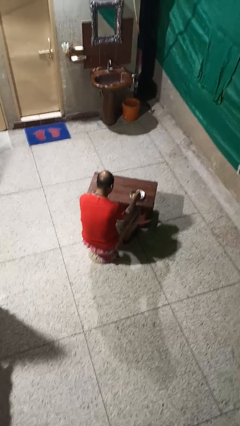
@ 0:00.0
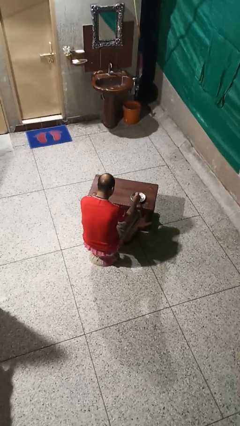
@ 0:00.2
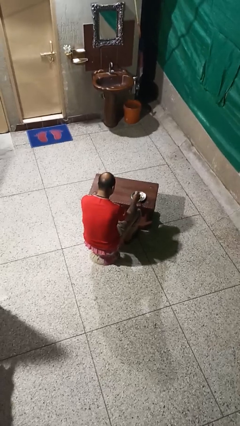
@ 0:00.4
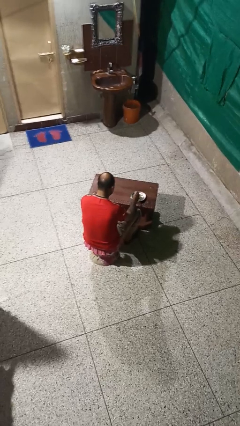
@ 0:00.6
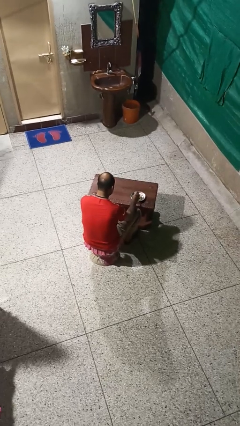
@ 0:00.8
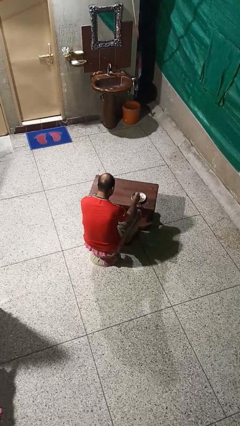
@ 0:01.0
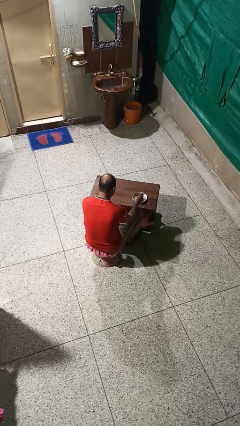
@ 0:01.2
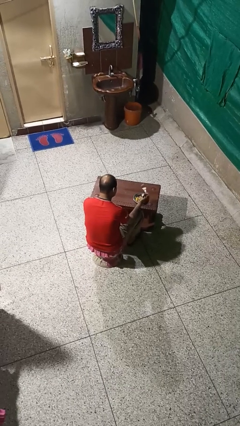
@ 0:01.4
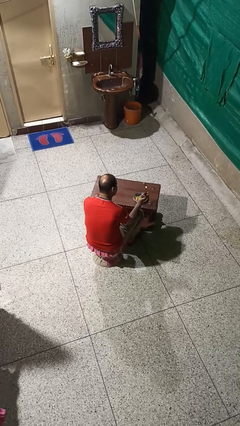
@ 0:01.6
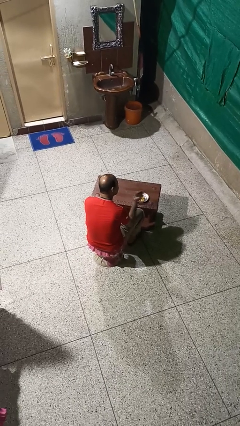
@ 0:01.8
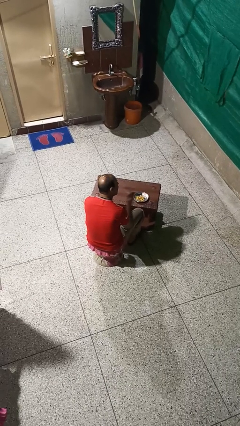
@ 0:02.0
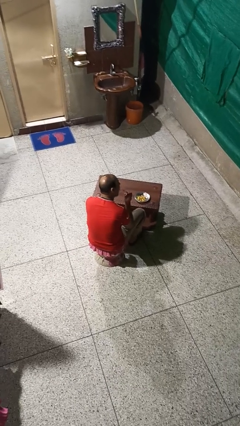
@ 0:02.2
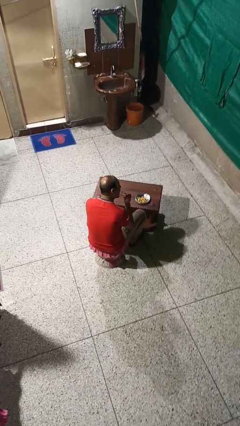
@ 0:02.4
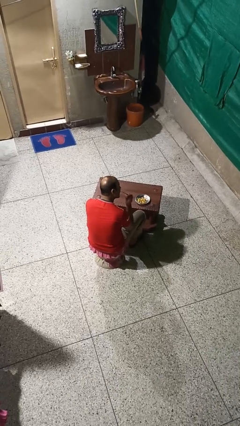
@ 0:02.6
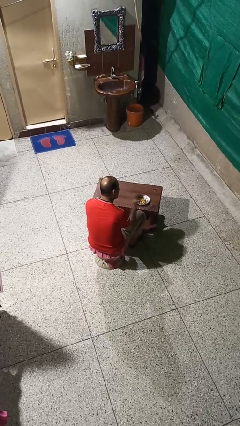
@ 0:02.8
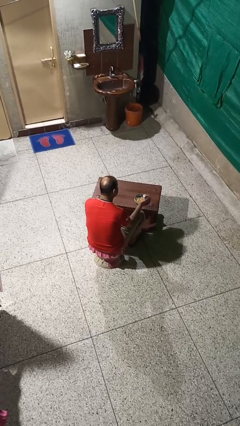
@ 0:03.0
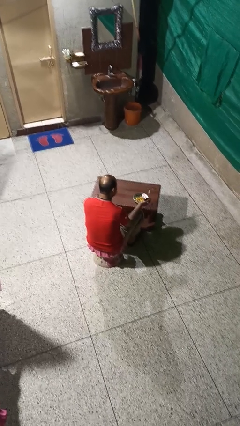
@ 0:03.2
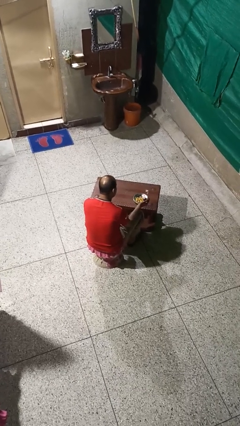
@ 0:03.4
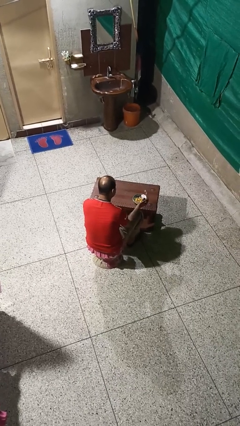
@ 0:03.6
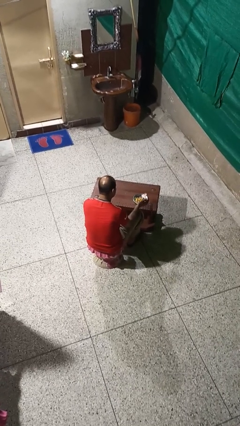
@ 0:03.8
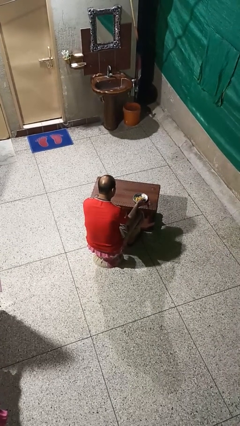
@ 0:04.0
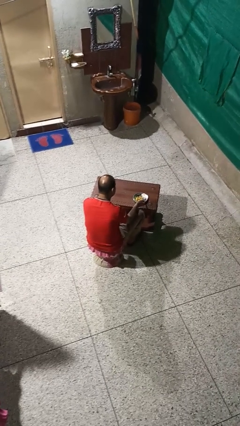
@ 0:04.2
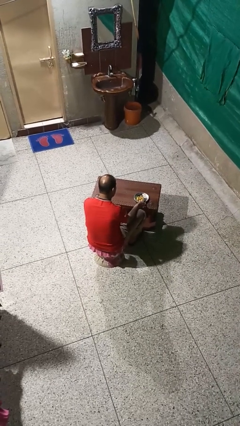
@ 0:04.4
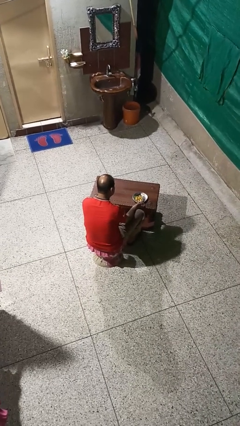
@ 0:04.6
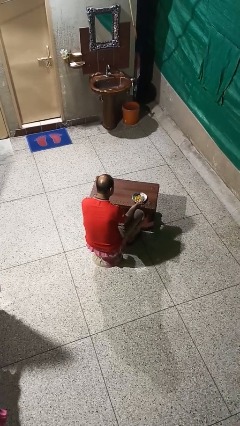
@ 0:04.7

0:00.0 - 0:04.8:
person eats with utensil

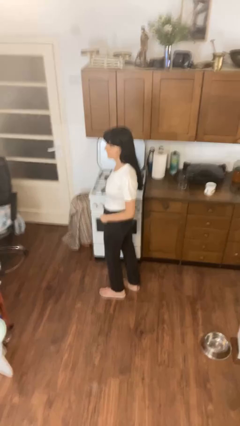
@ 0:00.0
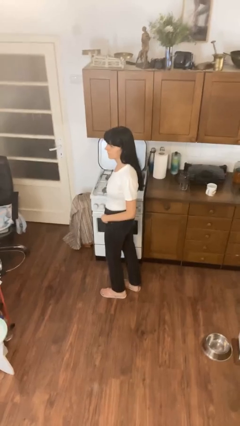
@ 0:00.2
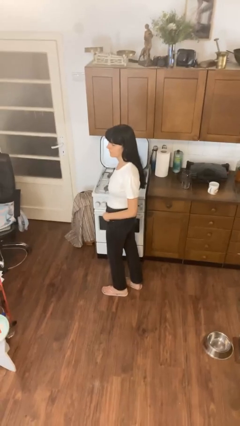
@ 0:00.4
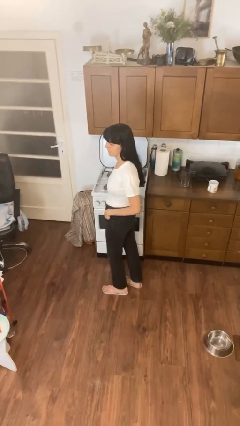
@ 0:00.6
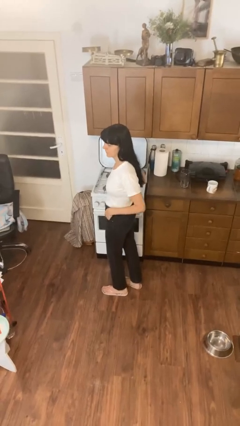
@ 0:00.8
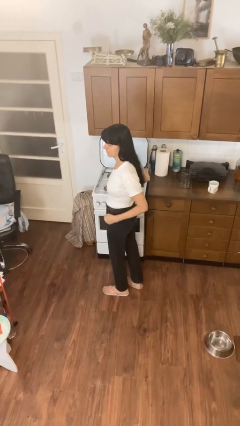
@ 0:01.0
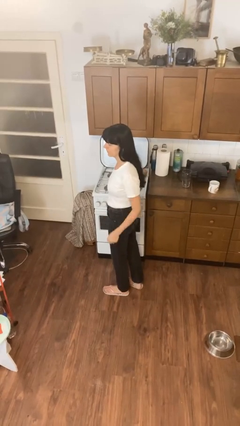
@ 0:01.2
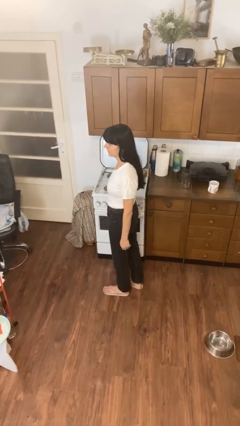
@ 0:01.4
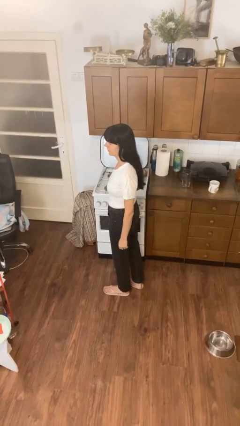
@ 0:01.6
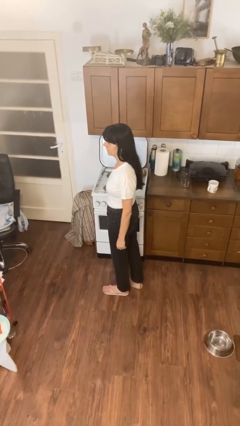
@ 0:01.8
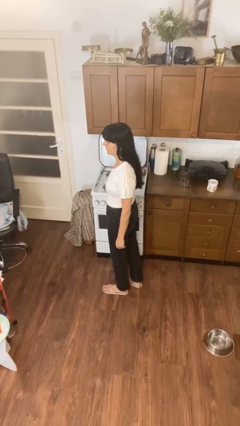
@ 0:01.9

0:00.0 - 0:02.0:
person puts hands in back pockets

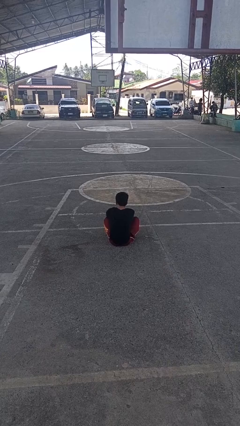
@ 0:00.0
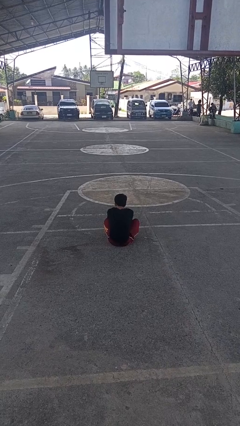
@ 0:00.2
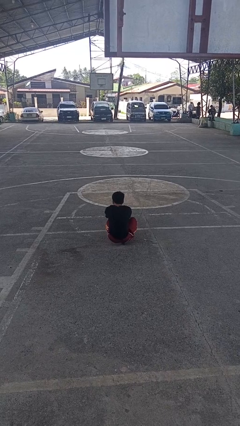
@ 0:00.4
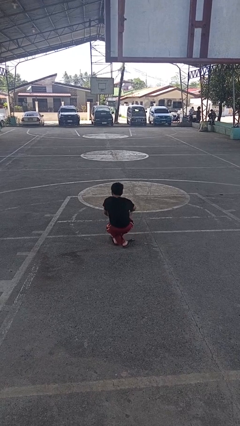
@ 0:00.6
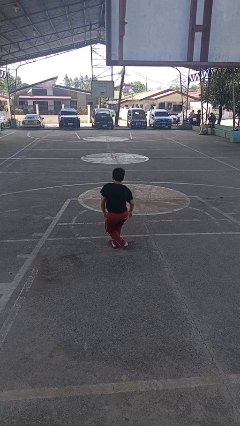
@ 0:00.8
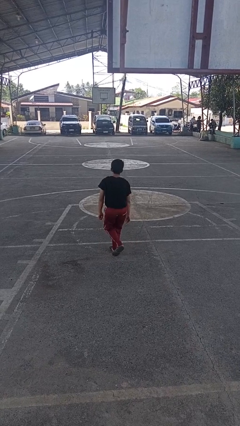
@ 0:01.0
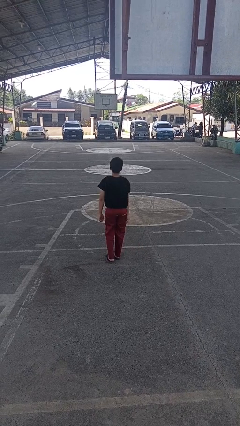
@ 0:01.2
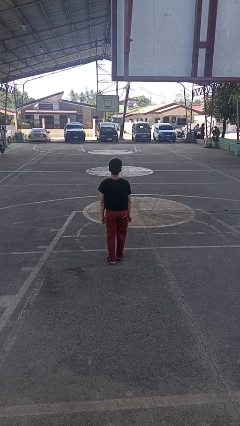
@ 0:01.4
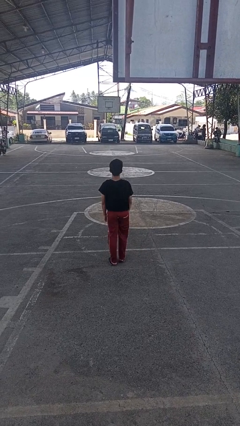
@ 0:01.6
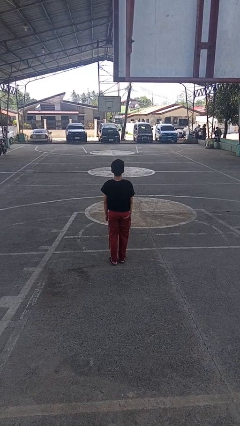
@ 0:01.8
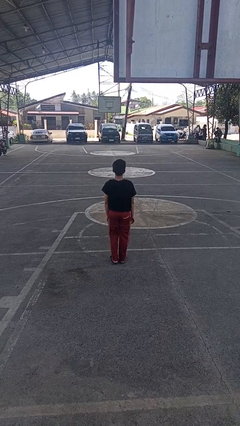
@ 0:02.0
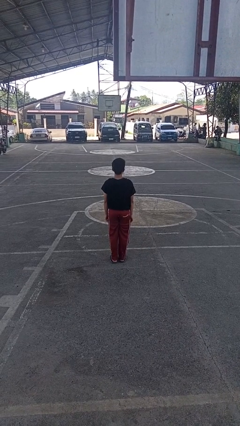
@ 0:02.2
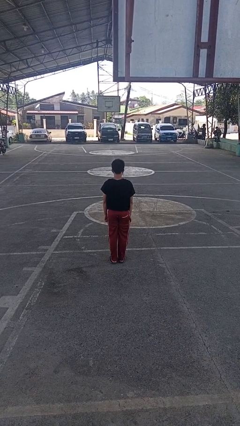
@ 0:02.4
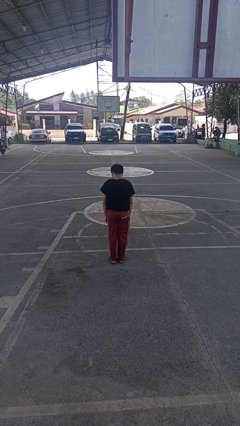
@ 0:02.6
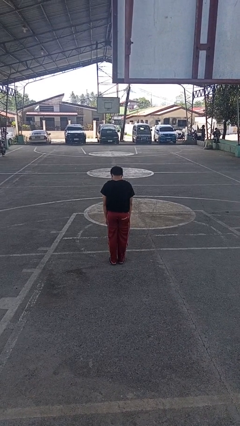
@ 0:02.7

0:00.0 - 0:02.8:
person stands up from floor

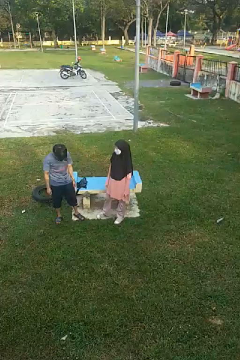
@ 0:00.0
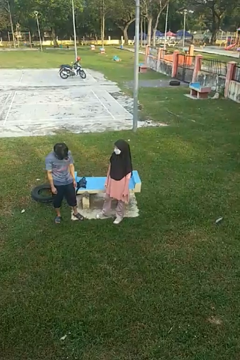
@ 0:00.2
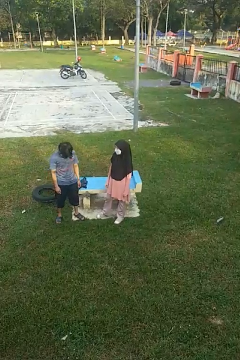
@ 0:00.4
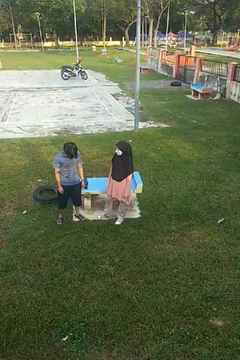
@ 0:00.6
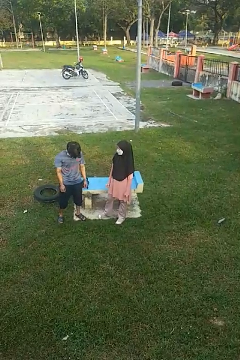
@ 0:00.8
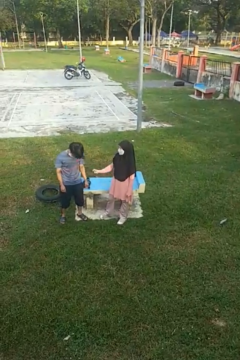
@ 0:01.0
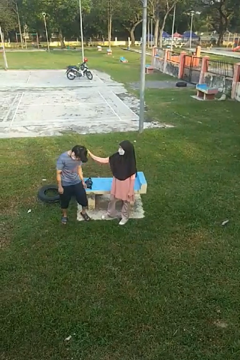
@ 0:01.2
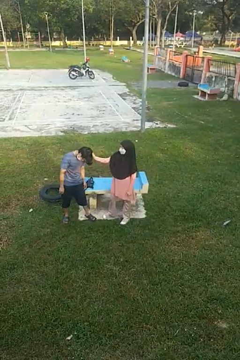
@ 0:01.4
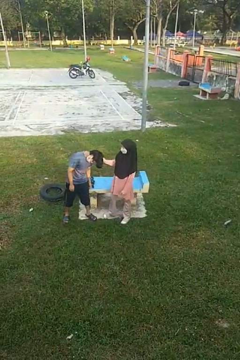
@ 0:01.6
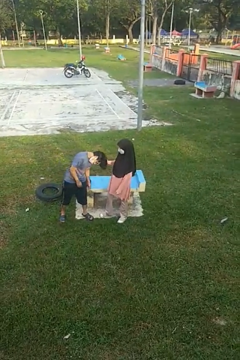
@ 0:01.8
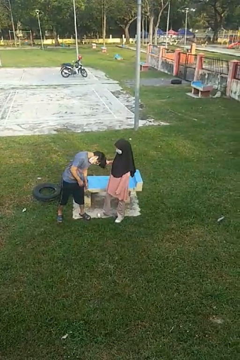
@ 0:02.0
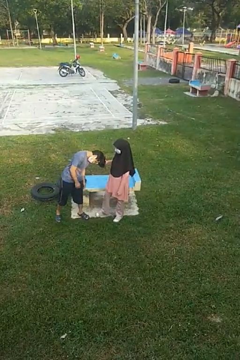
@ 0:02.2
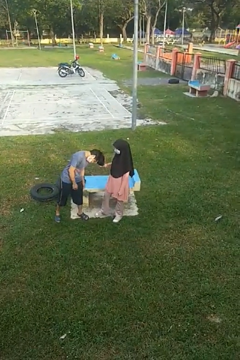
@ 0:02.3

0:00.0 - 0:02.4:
person grabs person by hair

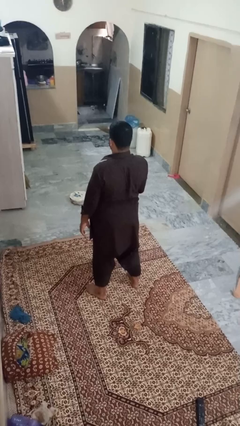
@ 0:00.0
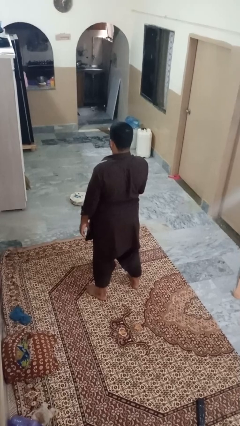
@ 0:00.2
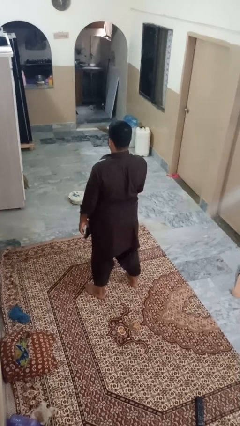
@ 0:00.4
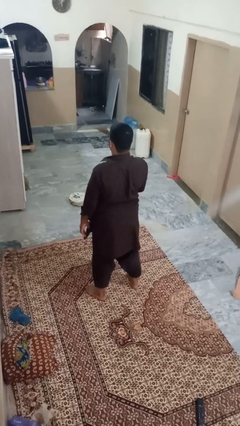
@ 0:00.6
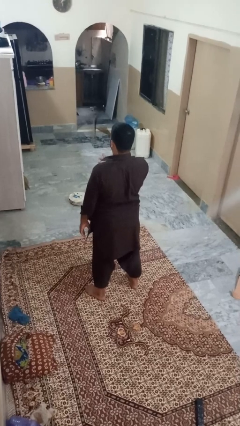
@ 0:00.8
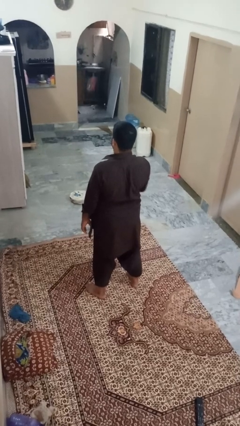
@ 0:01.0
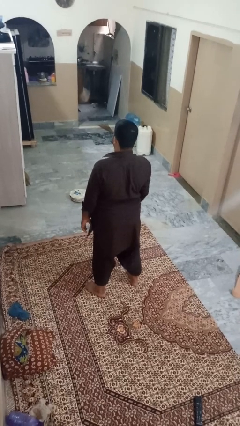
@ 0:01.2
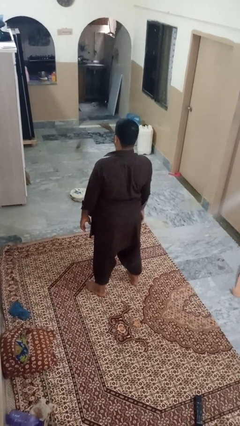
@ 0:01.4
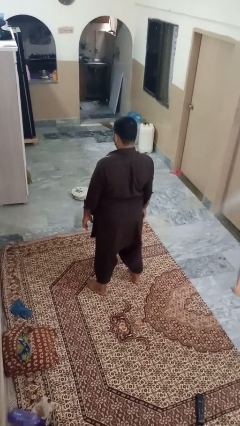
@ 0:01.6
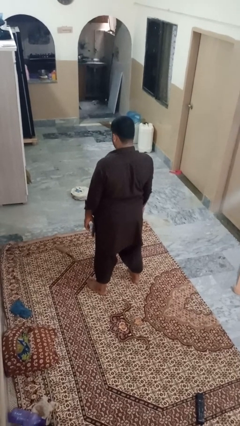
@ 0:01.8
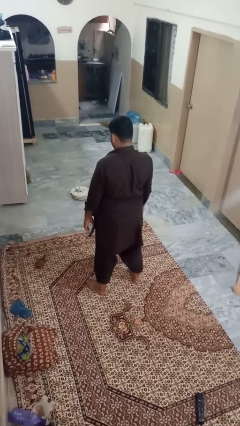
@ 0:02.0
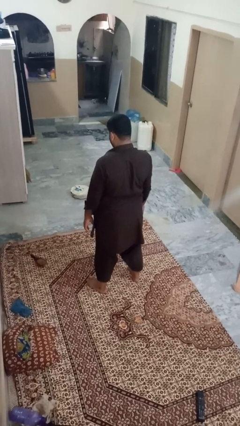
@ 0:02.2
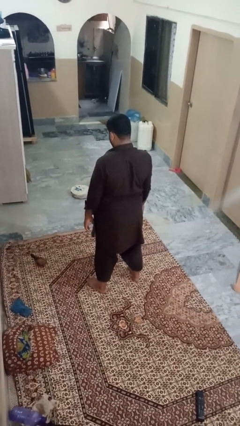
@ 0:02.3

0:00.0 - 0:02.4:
person throws object into air

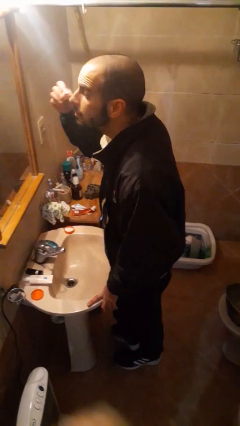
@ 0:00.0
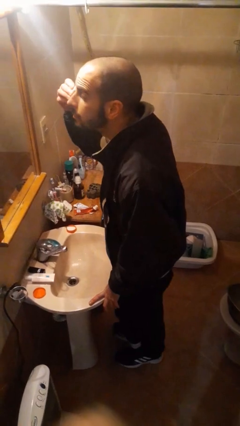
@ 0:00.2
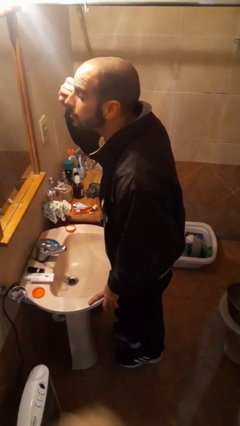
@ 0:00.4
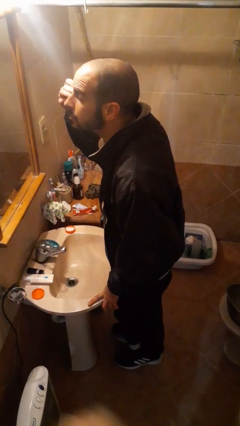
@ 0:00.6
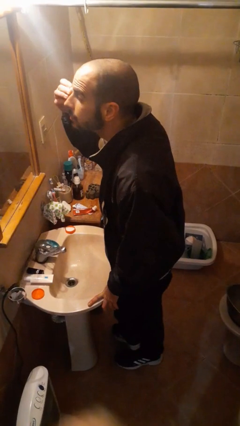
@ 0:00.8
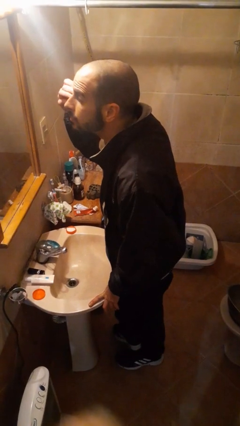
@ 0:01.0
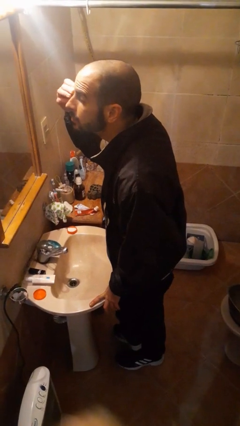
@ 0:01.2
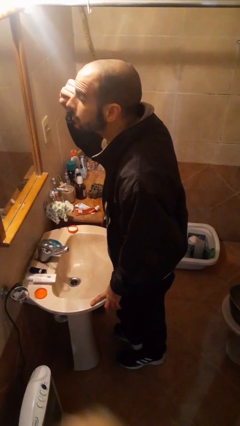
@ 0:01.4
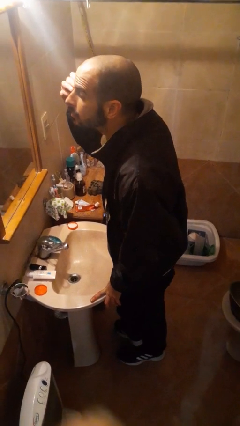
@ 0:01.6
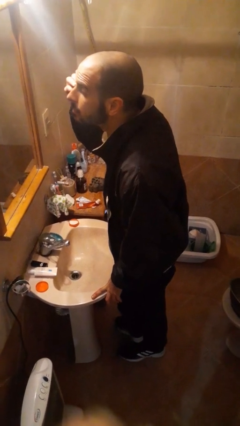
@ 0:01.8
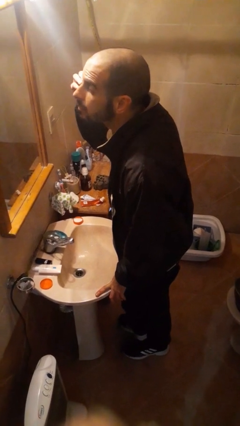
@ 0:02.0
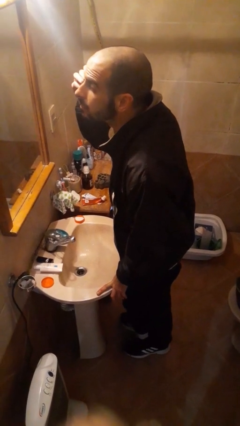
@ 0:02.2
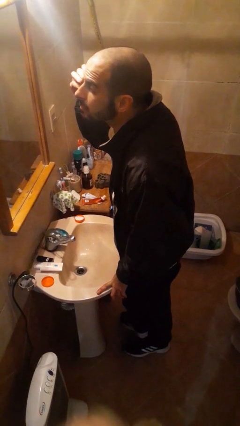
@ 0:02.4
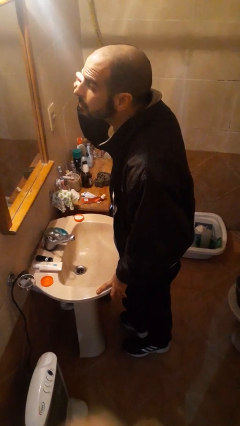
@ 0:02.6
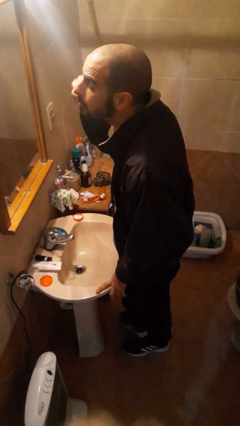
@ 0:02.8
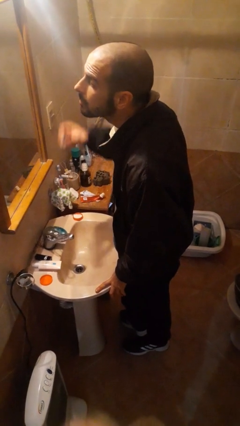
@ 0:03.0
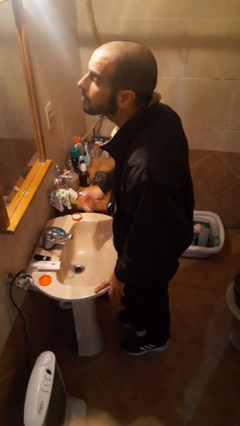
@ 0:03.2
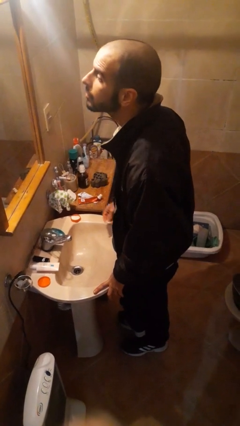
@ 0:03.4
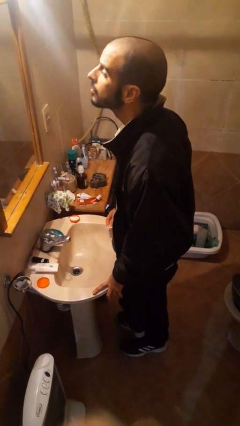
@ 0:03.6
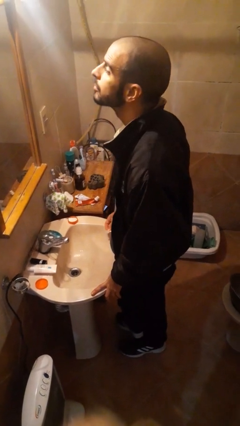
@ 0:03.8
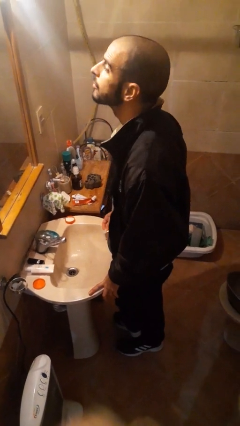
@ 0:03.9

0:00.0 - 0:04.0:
person applies eye makeup
